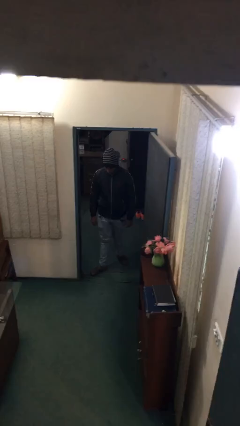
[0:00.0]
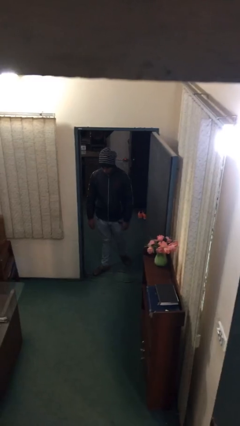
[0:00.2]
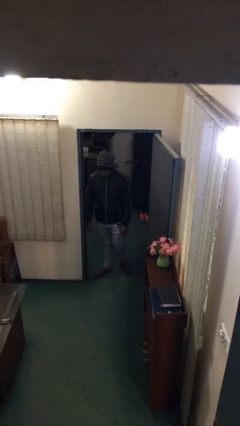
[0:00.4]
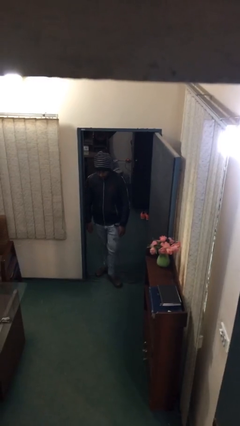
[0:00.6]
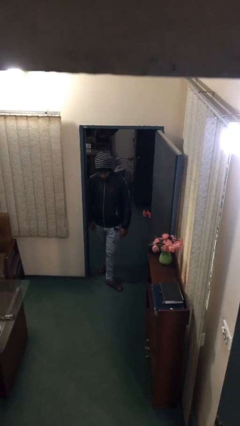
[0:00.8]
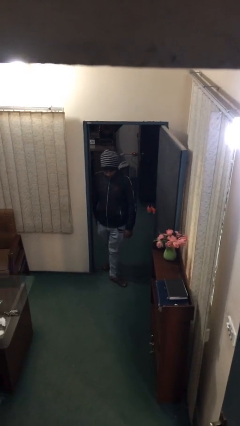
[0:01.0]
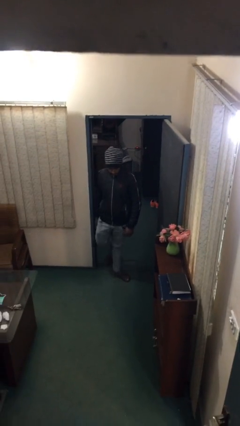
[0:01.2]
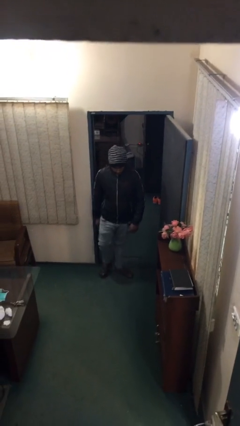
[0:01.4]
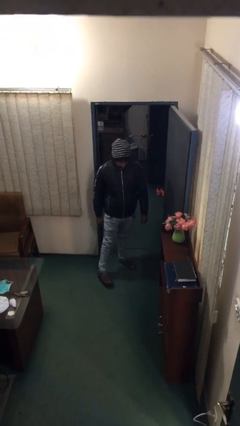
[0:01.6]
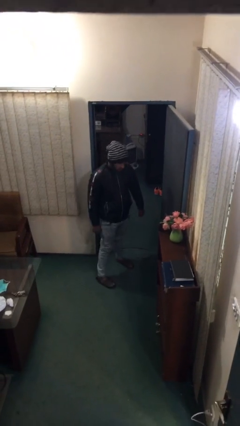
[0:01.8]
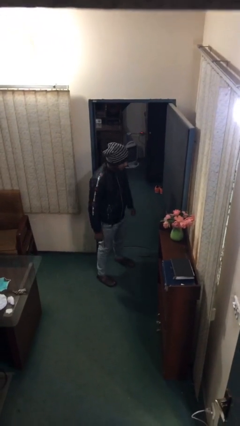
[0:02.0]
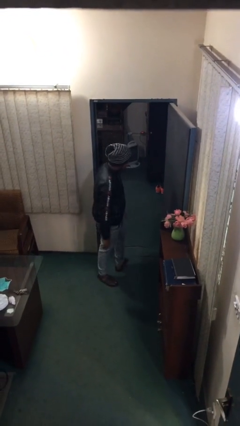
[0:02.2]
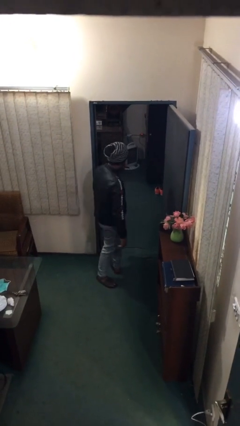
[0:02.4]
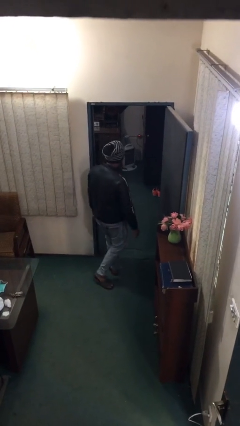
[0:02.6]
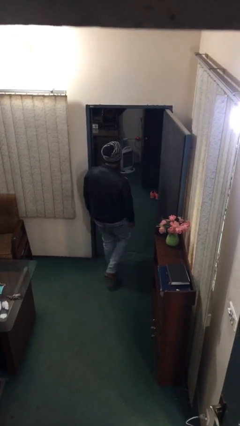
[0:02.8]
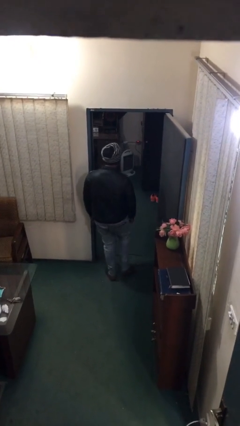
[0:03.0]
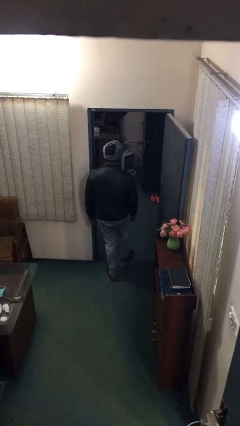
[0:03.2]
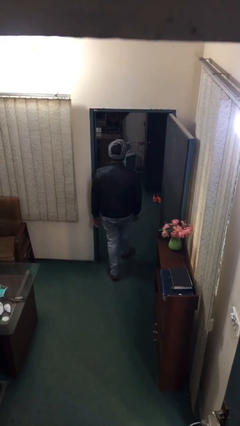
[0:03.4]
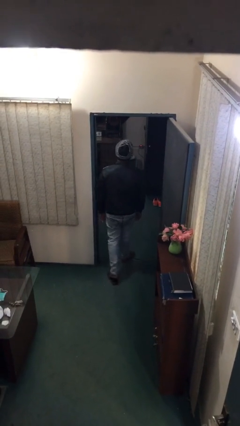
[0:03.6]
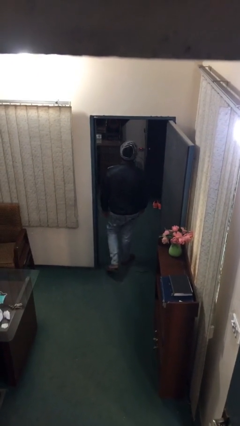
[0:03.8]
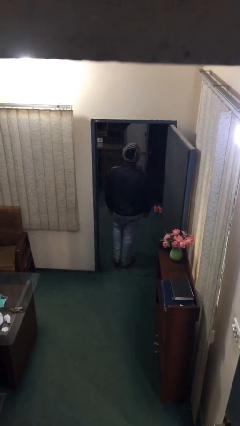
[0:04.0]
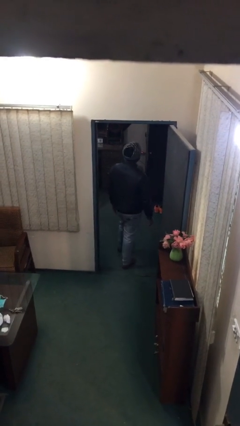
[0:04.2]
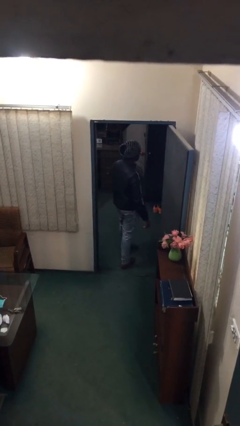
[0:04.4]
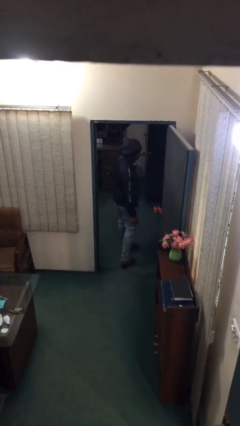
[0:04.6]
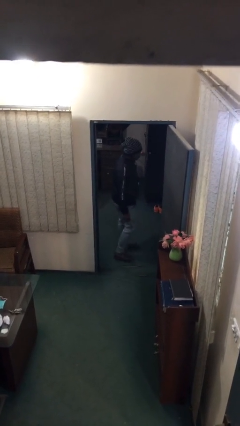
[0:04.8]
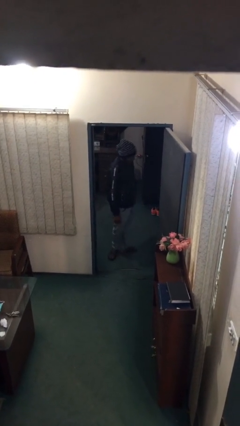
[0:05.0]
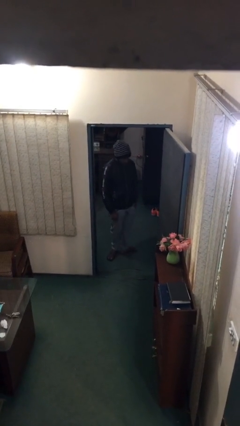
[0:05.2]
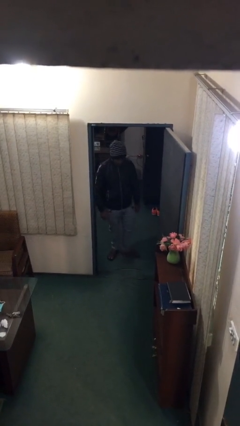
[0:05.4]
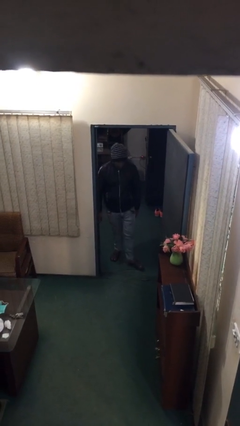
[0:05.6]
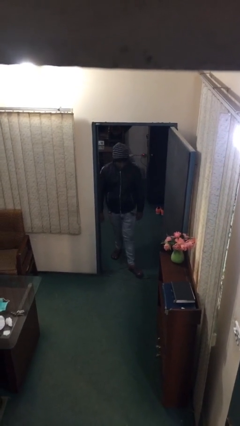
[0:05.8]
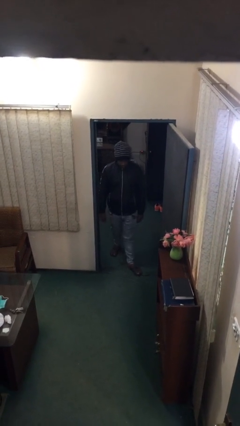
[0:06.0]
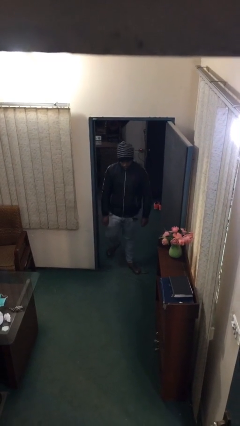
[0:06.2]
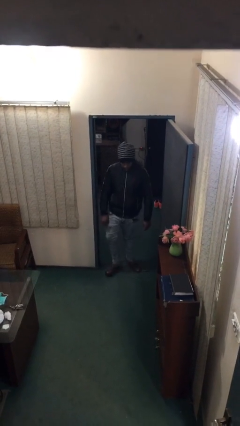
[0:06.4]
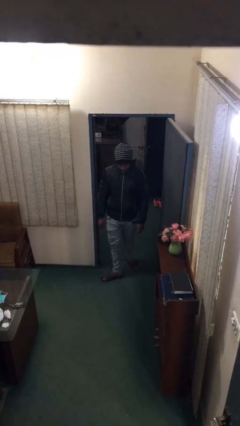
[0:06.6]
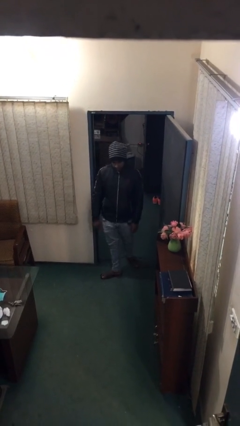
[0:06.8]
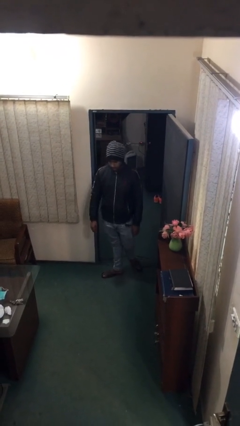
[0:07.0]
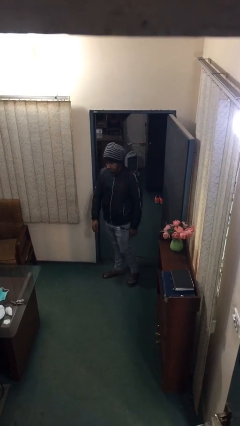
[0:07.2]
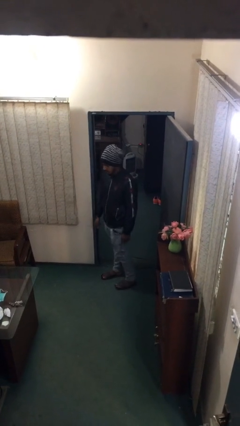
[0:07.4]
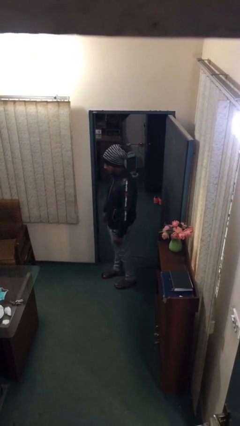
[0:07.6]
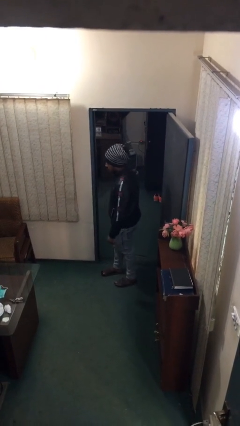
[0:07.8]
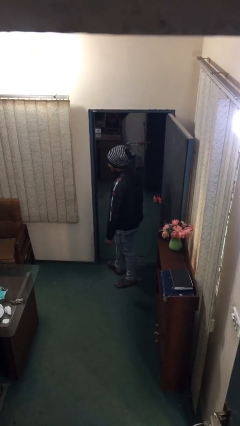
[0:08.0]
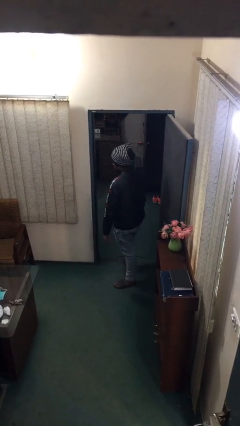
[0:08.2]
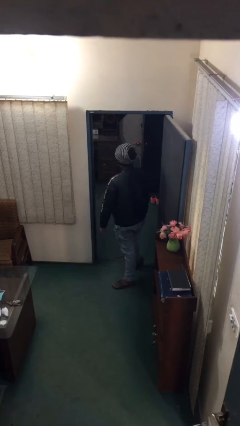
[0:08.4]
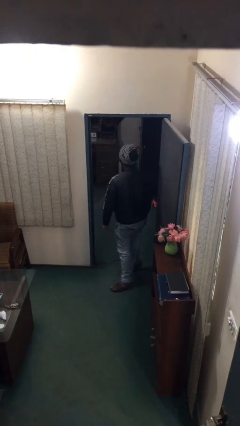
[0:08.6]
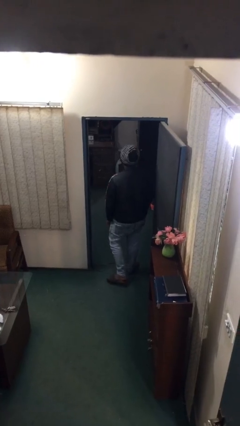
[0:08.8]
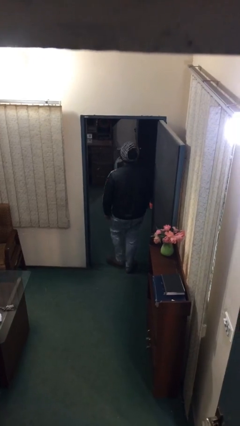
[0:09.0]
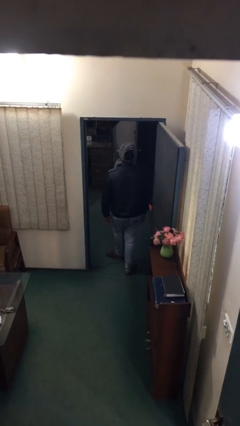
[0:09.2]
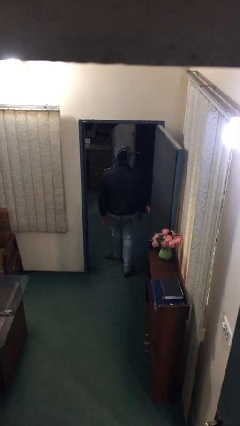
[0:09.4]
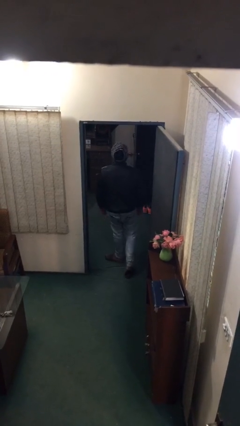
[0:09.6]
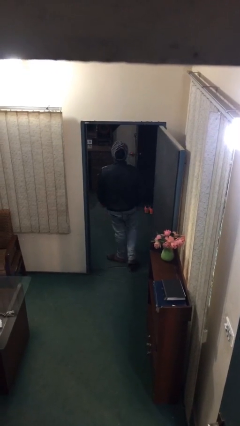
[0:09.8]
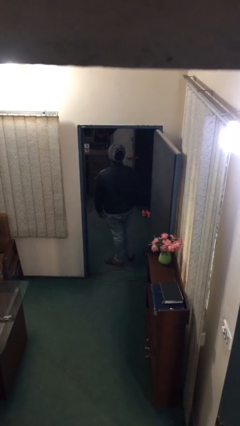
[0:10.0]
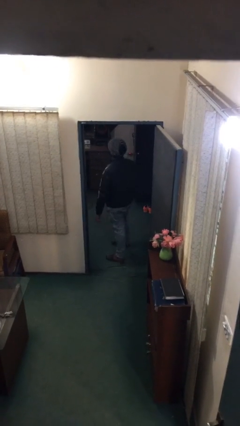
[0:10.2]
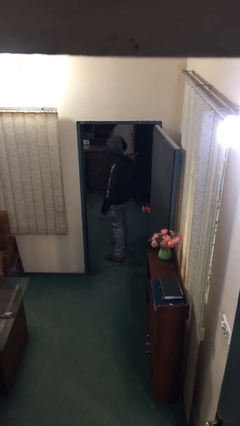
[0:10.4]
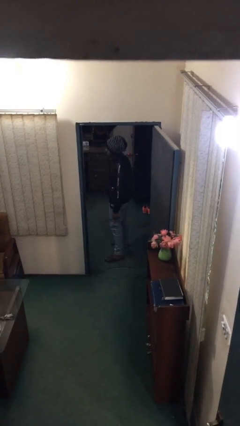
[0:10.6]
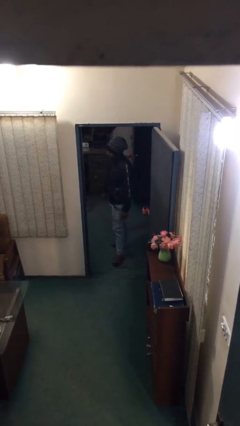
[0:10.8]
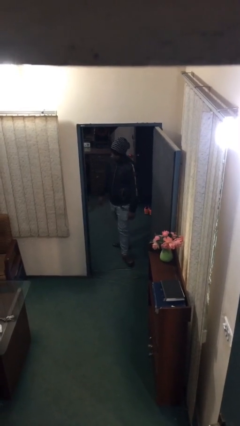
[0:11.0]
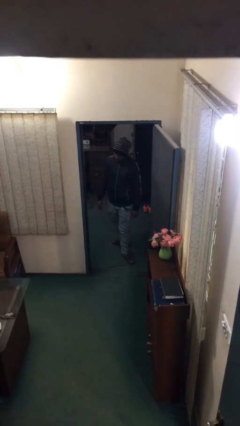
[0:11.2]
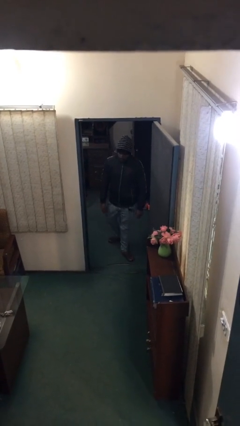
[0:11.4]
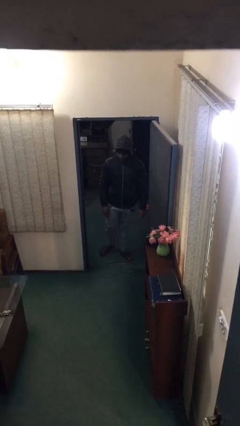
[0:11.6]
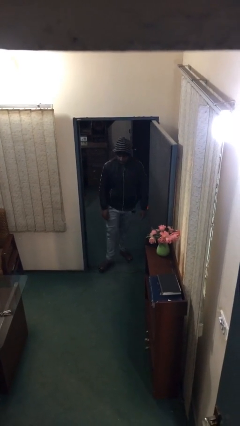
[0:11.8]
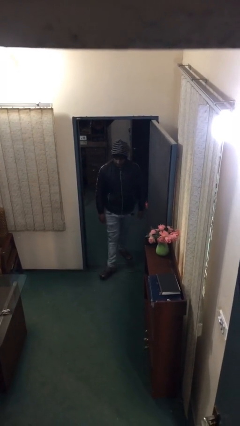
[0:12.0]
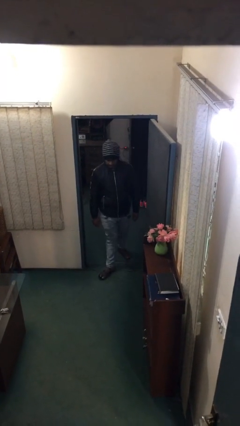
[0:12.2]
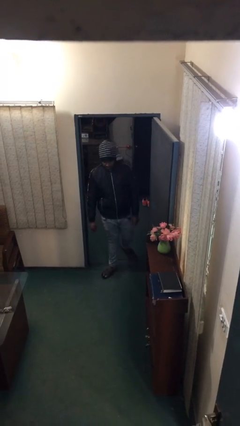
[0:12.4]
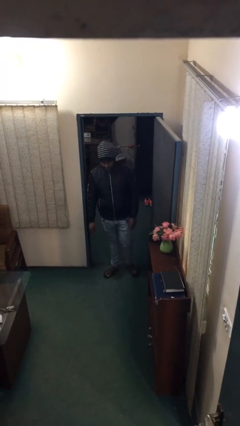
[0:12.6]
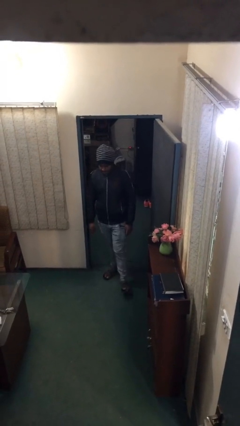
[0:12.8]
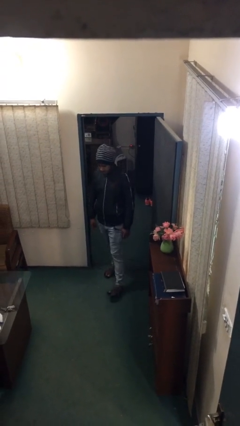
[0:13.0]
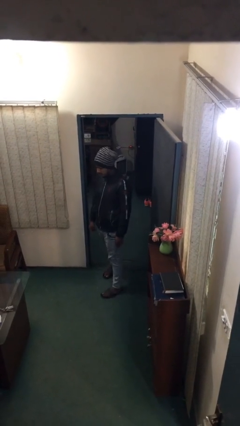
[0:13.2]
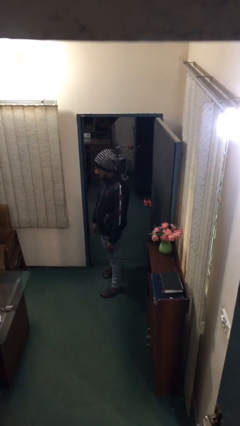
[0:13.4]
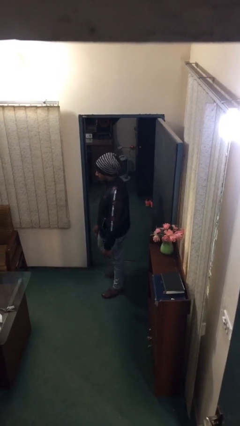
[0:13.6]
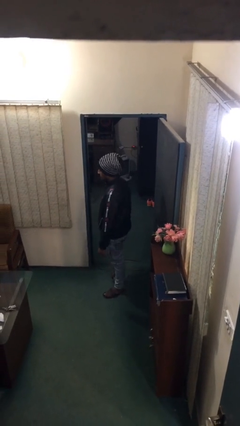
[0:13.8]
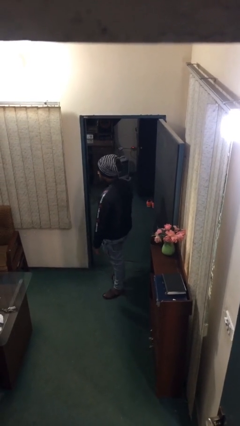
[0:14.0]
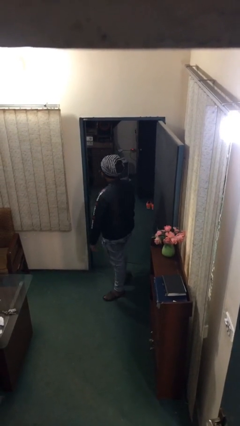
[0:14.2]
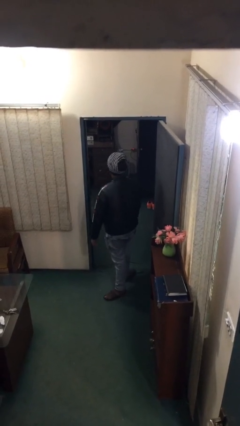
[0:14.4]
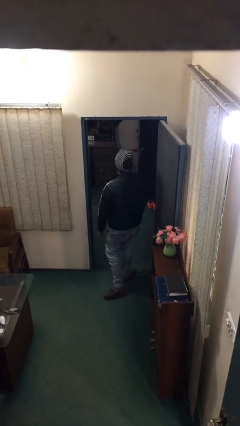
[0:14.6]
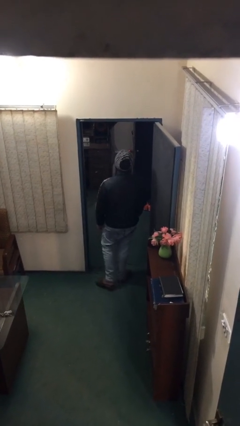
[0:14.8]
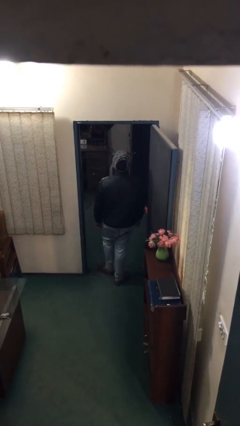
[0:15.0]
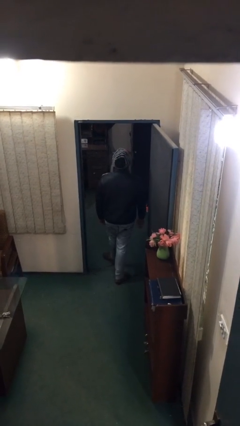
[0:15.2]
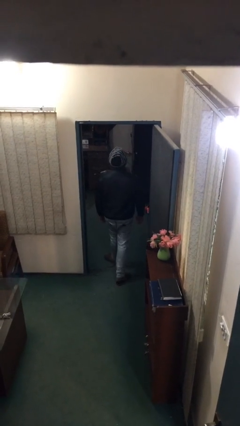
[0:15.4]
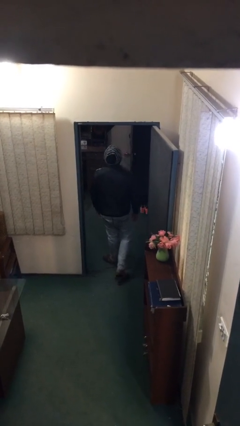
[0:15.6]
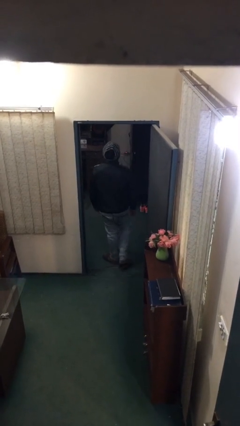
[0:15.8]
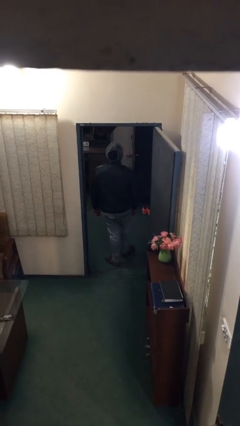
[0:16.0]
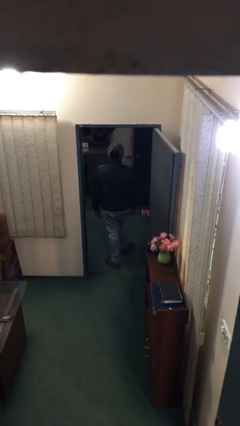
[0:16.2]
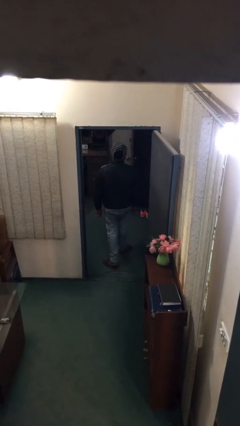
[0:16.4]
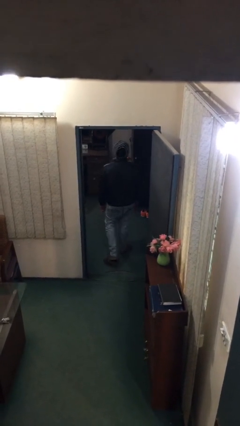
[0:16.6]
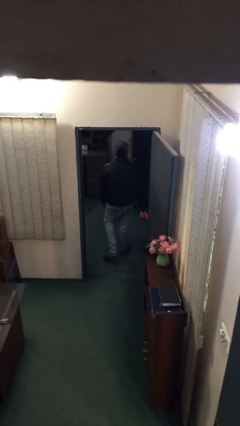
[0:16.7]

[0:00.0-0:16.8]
person texts on phone

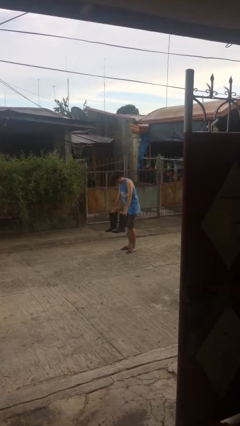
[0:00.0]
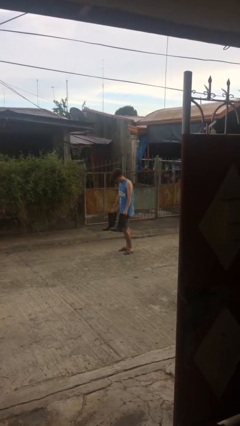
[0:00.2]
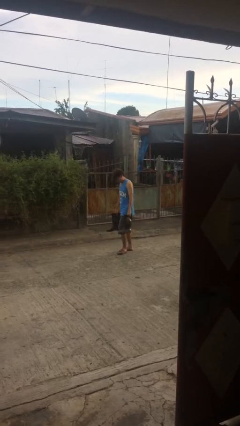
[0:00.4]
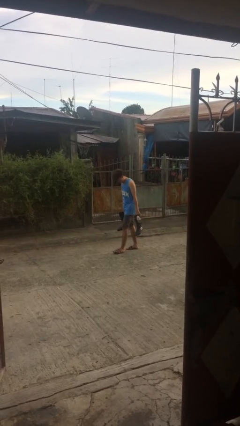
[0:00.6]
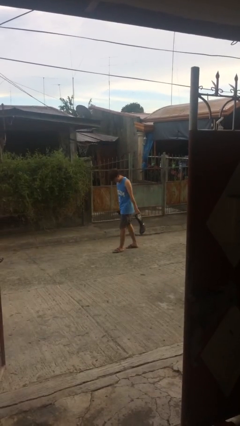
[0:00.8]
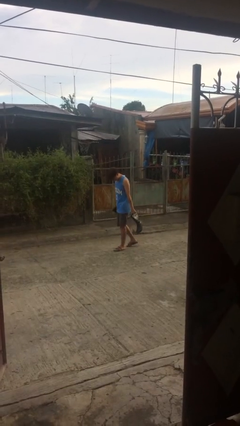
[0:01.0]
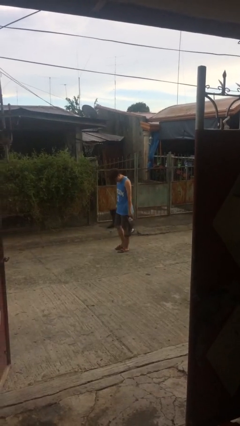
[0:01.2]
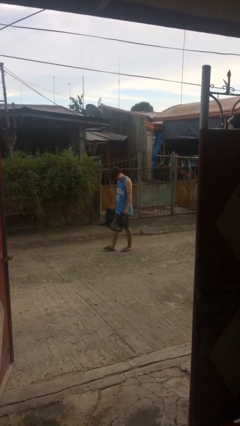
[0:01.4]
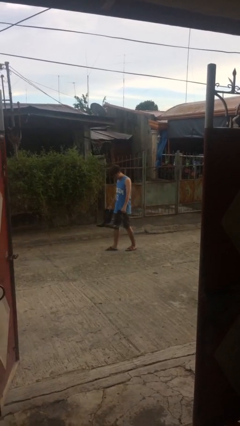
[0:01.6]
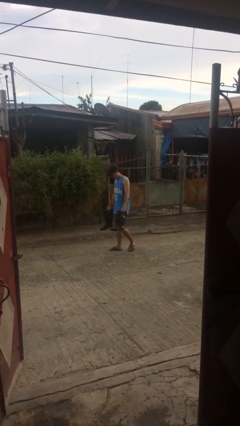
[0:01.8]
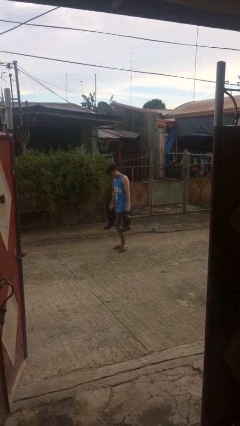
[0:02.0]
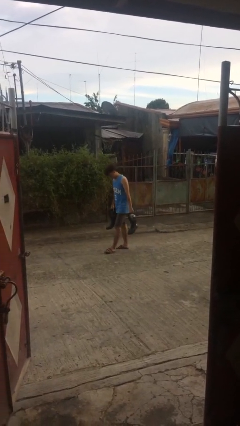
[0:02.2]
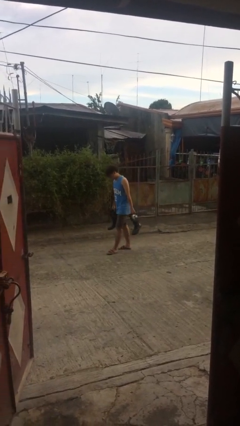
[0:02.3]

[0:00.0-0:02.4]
person carries heavy object
